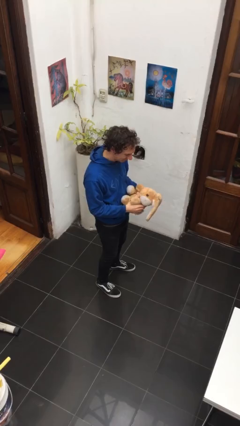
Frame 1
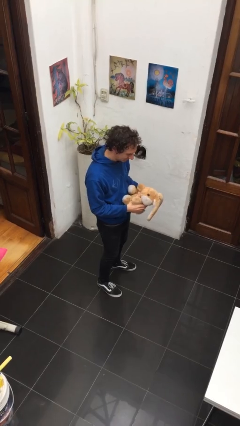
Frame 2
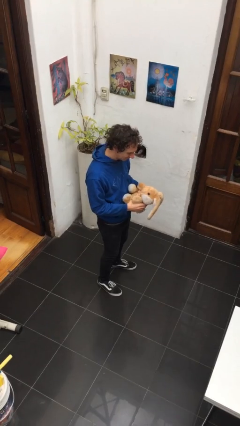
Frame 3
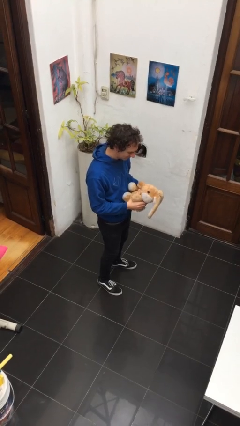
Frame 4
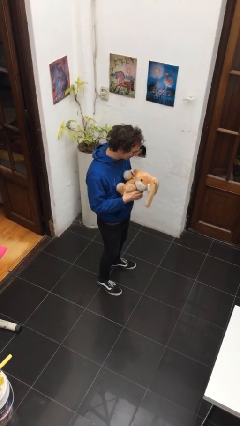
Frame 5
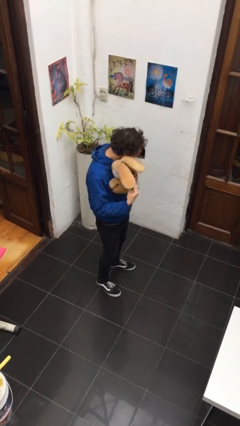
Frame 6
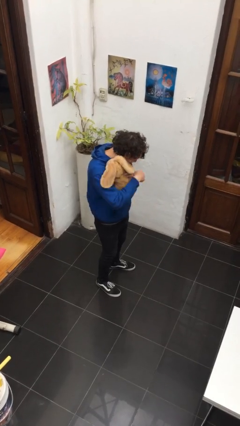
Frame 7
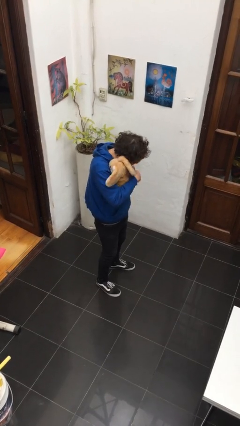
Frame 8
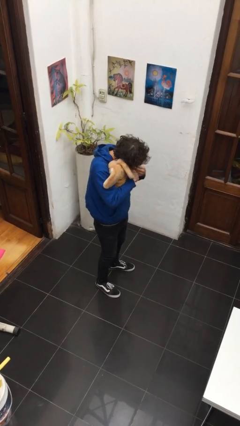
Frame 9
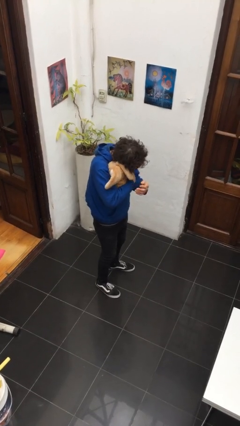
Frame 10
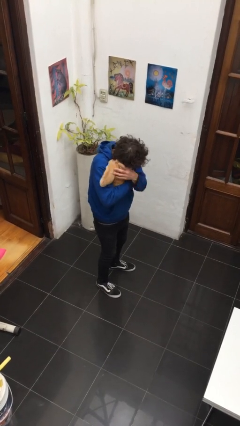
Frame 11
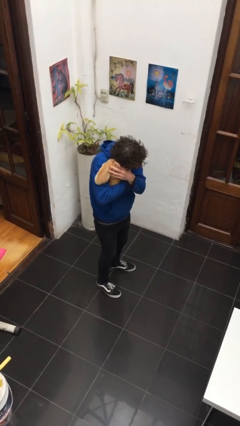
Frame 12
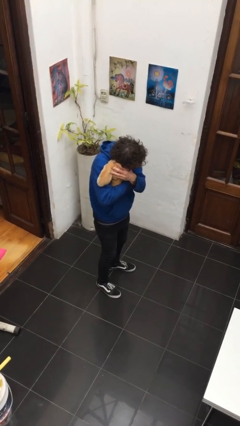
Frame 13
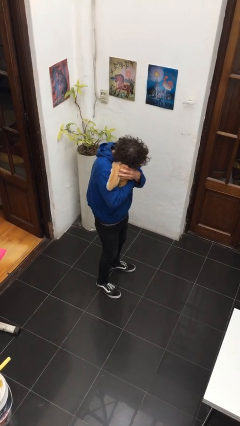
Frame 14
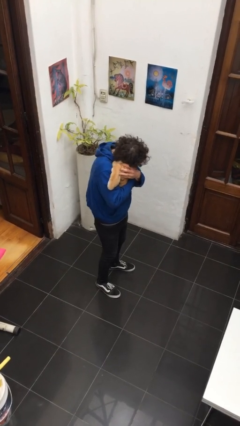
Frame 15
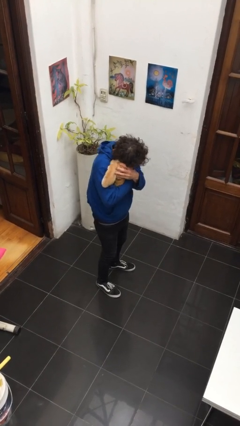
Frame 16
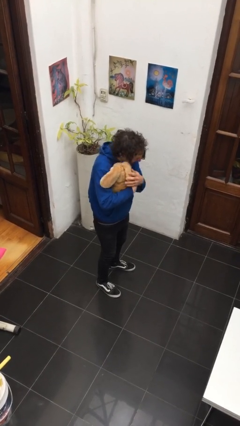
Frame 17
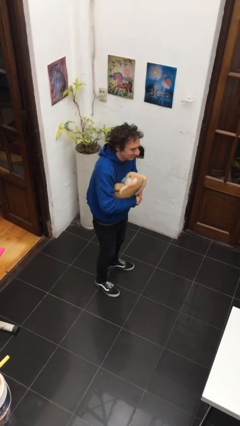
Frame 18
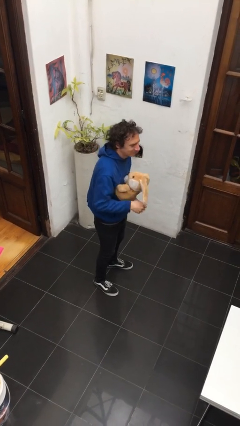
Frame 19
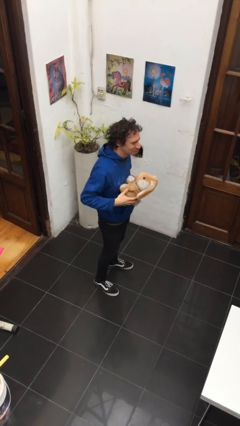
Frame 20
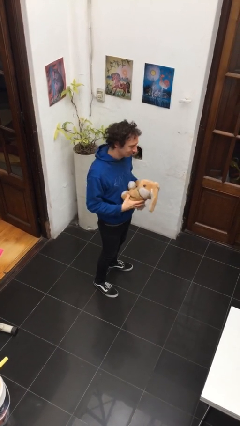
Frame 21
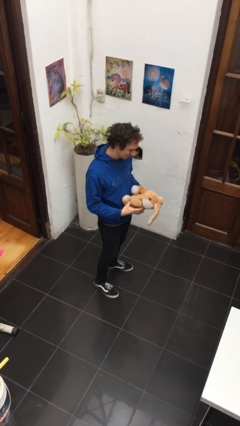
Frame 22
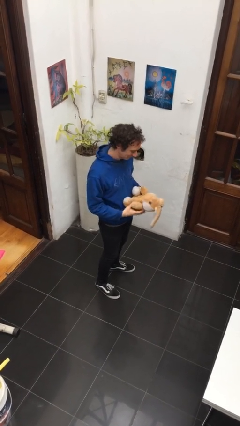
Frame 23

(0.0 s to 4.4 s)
person hugs stuffed animal

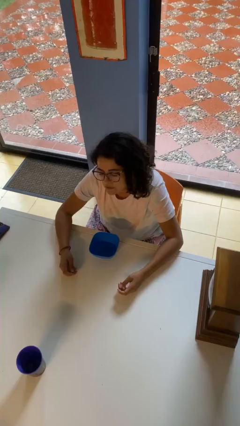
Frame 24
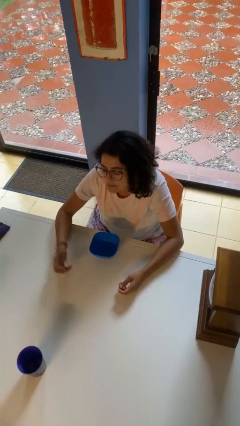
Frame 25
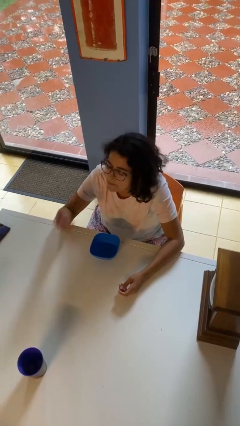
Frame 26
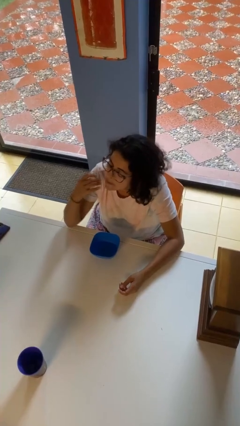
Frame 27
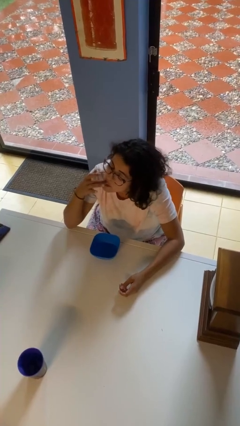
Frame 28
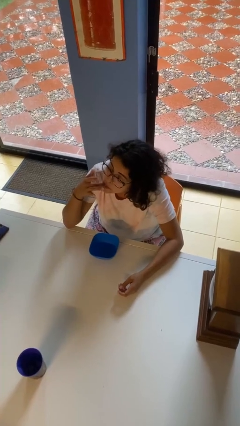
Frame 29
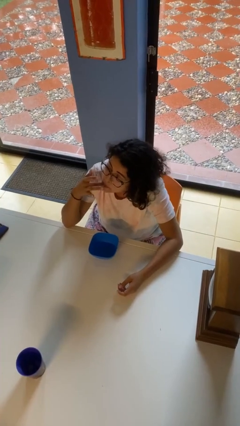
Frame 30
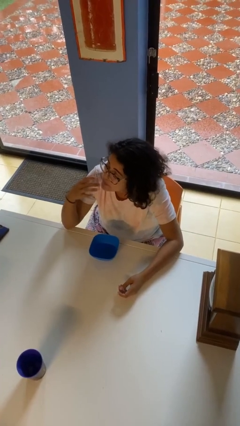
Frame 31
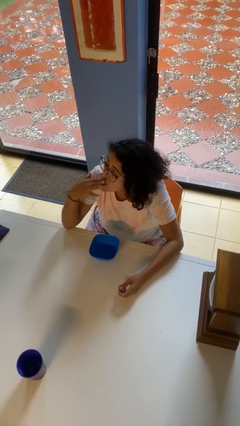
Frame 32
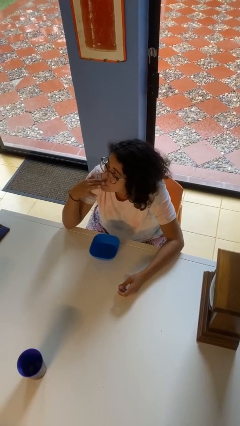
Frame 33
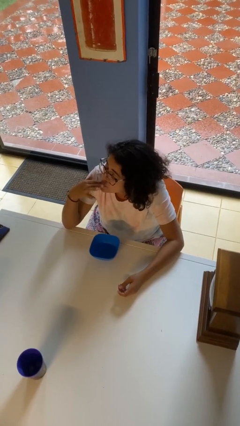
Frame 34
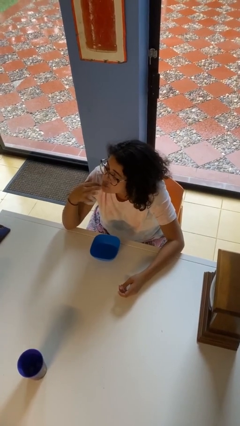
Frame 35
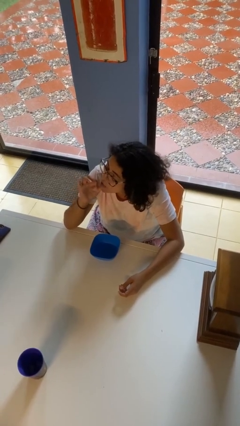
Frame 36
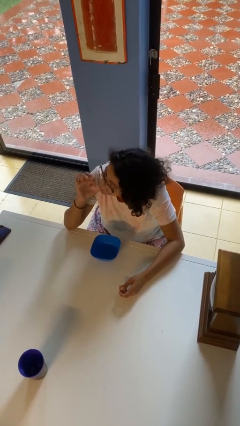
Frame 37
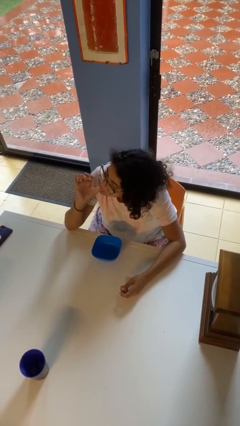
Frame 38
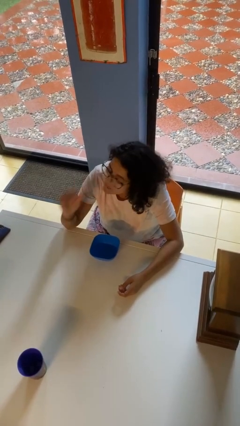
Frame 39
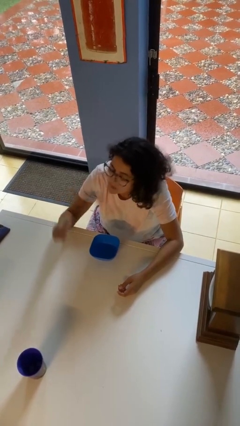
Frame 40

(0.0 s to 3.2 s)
person licks fingers

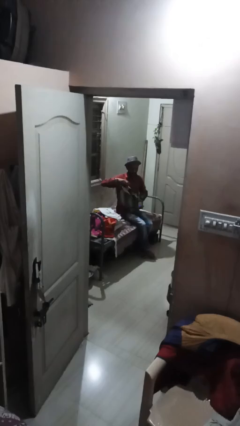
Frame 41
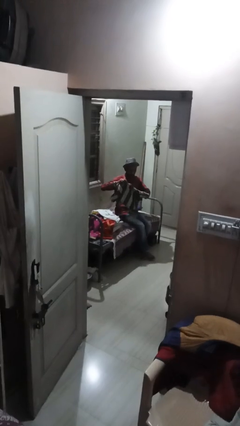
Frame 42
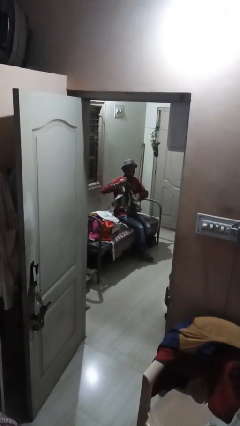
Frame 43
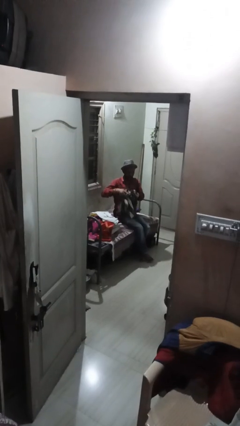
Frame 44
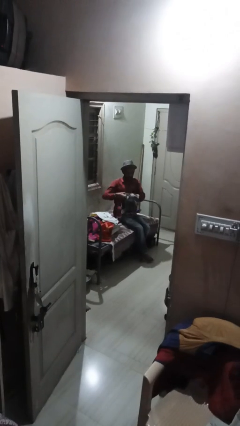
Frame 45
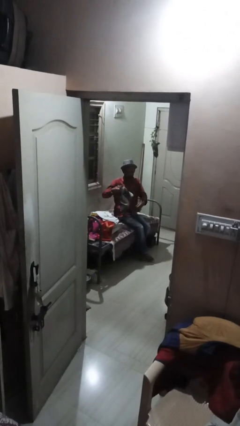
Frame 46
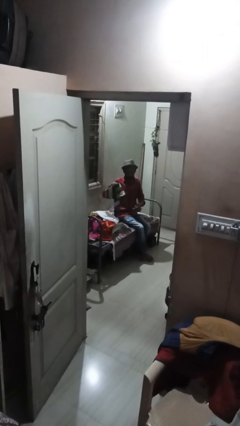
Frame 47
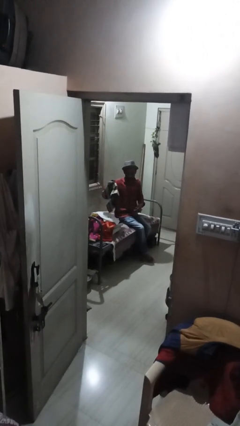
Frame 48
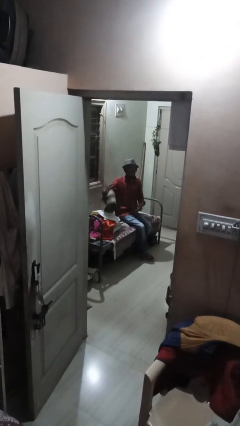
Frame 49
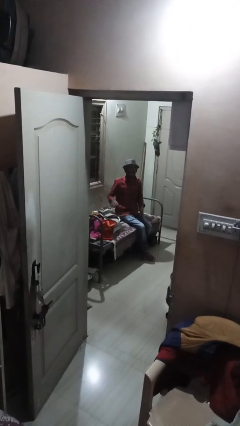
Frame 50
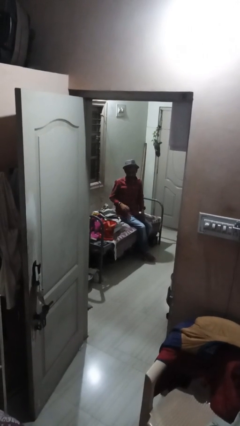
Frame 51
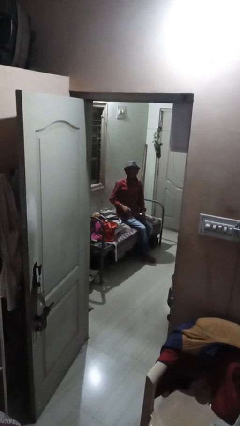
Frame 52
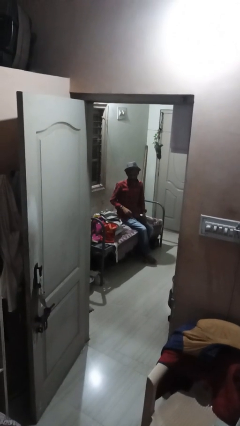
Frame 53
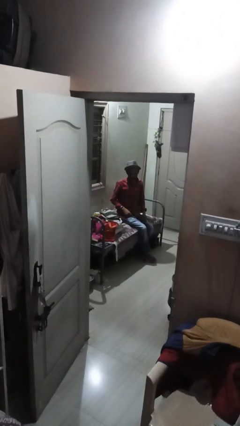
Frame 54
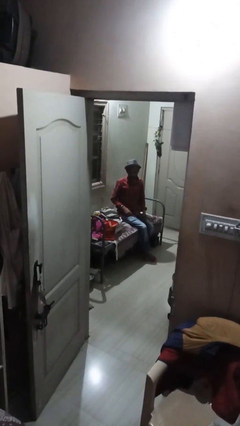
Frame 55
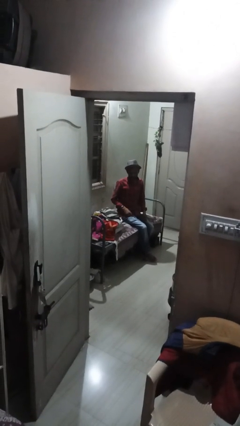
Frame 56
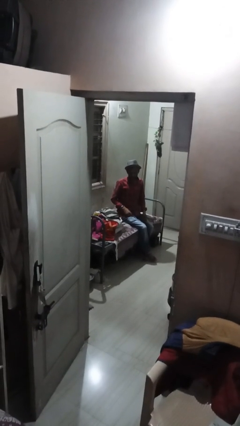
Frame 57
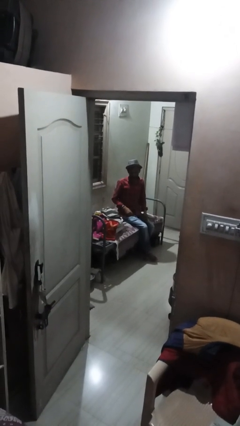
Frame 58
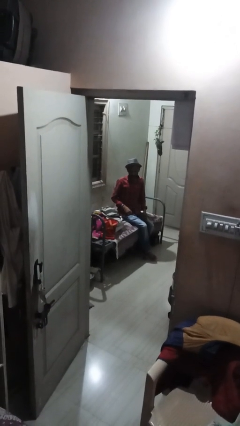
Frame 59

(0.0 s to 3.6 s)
person folds shirt

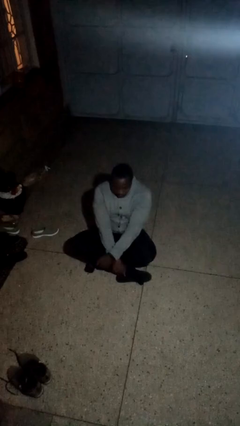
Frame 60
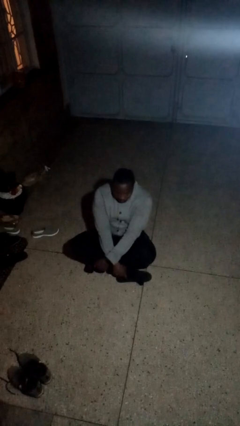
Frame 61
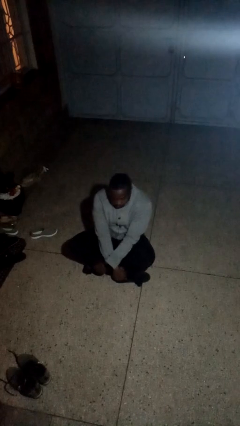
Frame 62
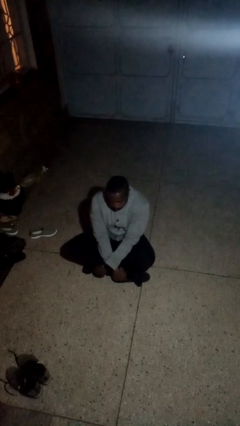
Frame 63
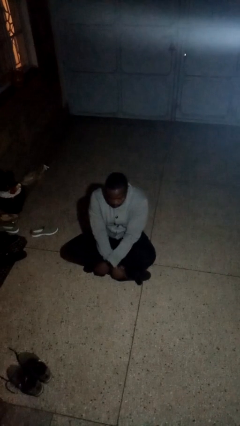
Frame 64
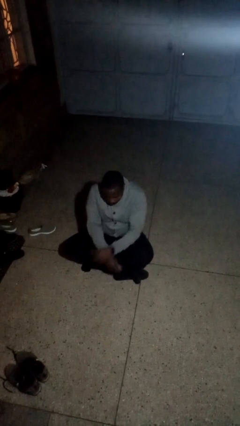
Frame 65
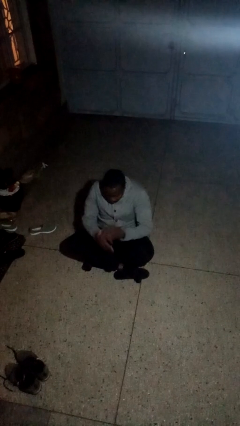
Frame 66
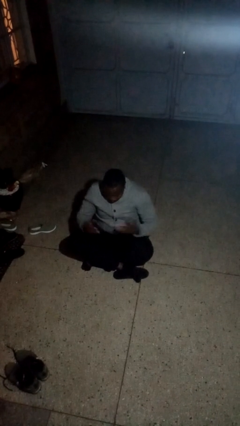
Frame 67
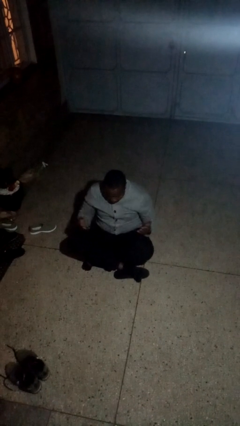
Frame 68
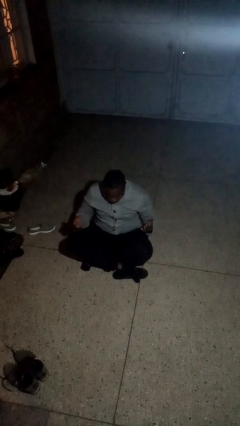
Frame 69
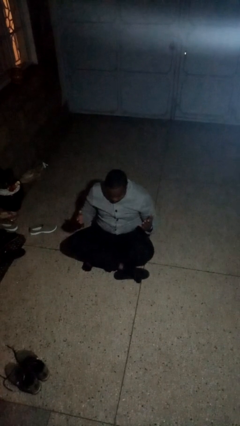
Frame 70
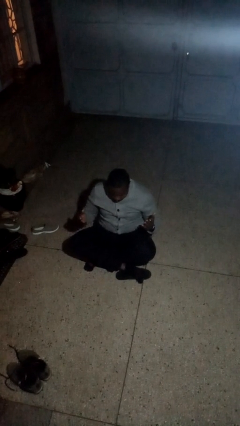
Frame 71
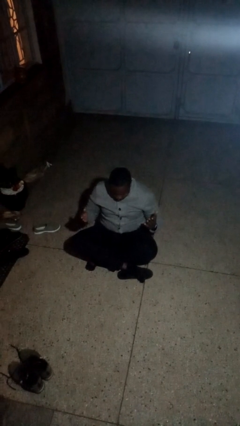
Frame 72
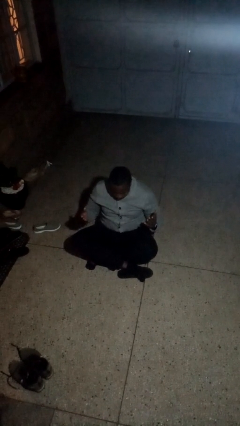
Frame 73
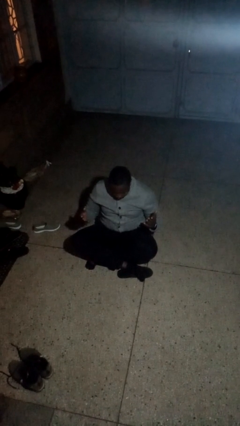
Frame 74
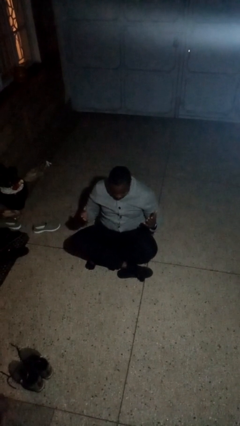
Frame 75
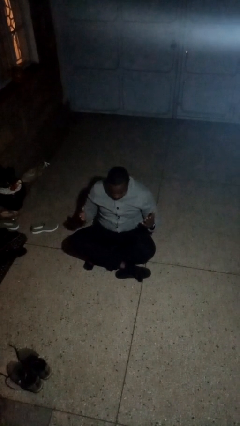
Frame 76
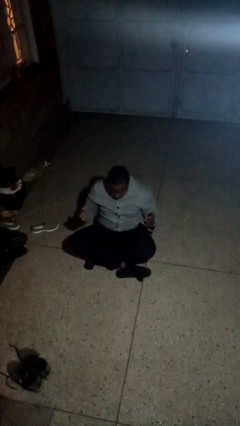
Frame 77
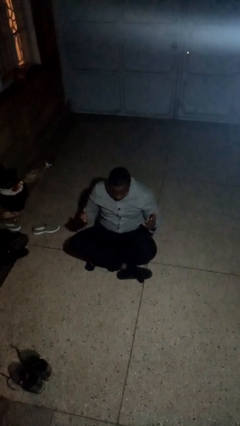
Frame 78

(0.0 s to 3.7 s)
person prays

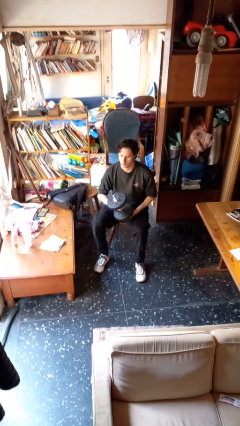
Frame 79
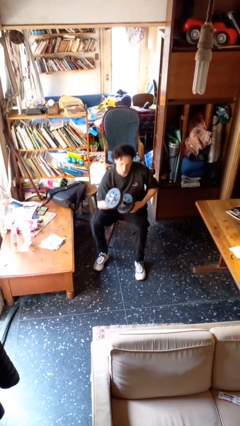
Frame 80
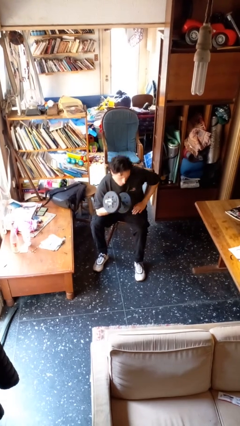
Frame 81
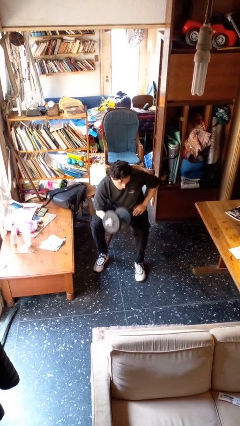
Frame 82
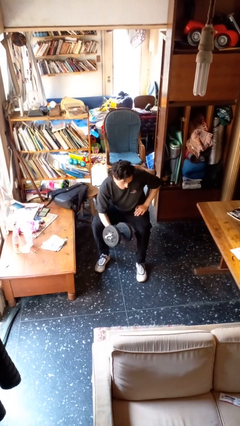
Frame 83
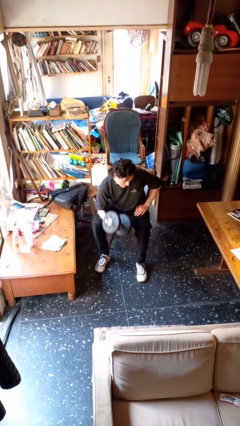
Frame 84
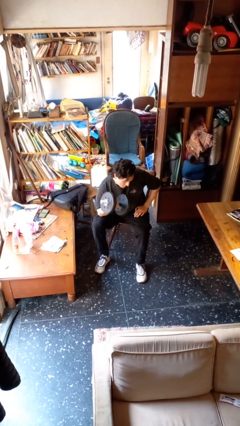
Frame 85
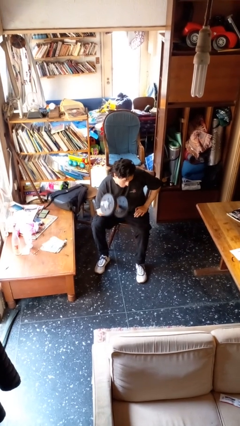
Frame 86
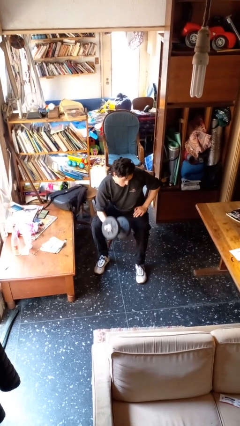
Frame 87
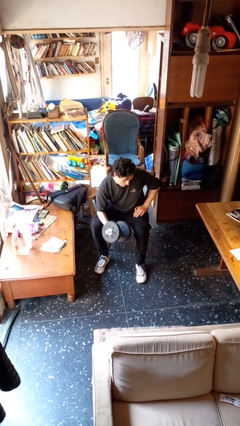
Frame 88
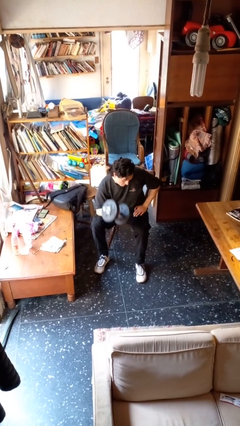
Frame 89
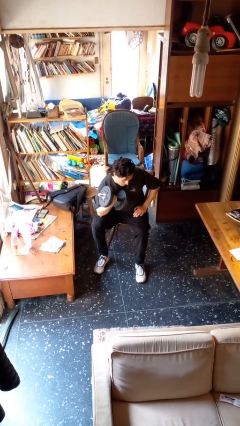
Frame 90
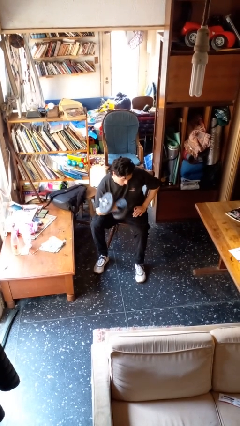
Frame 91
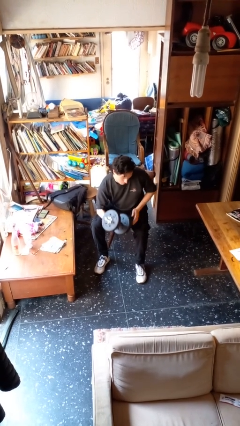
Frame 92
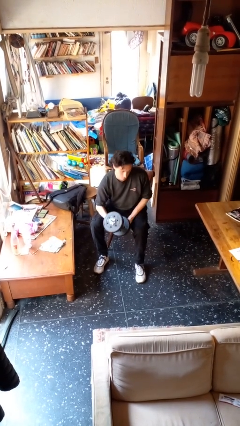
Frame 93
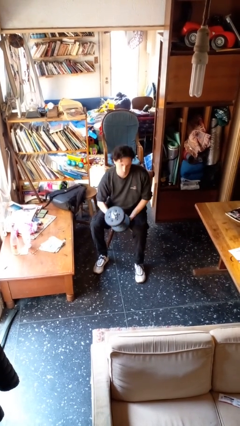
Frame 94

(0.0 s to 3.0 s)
person lifts dumbbells
